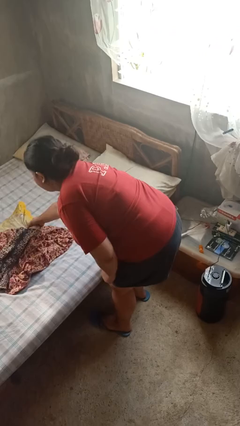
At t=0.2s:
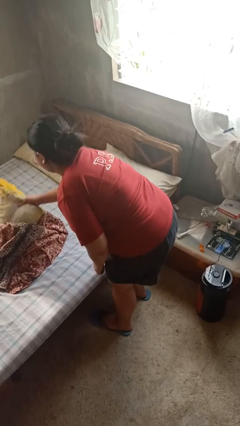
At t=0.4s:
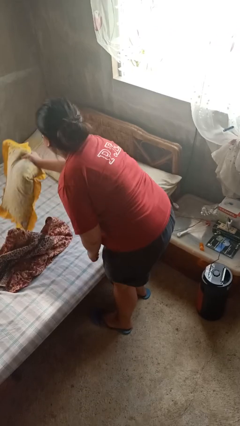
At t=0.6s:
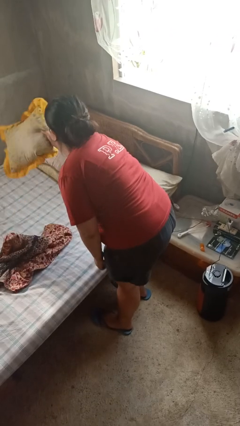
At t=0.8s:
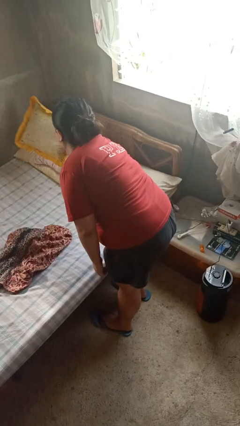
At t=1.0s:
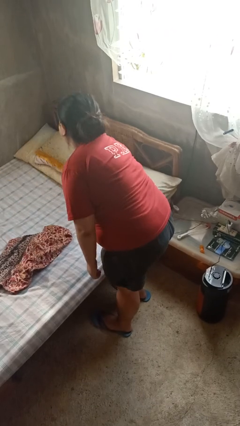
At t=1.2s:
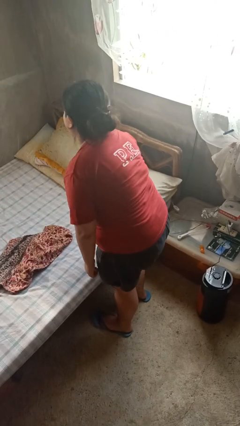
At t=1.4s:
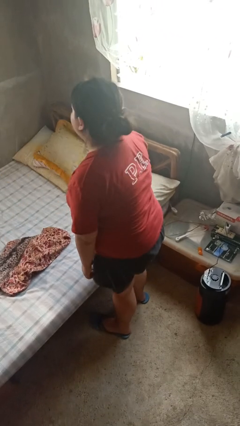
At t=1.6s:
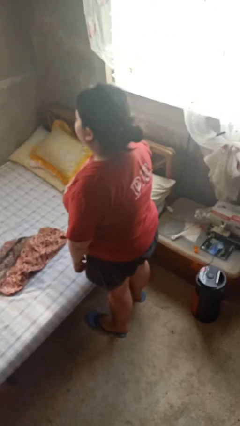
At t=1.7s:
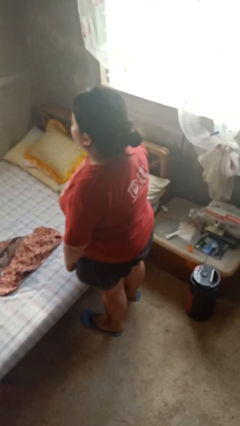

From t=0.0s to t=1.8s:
person makes bed

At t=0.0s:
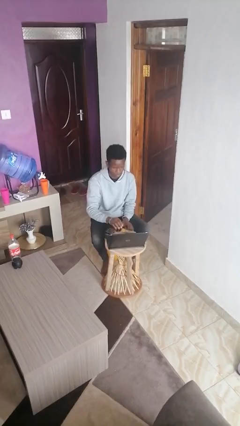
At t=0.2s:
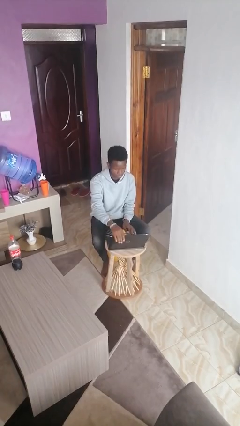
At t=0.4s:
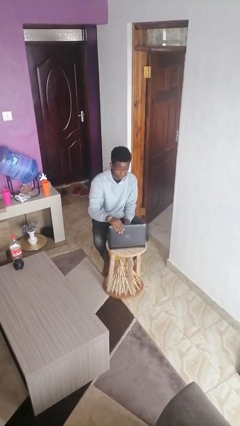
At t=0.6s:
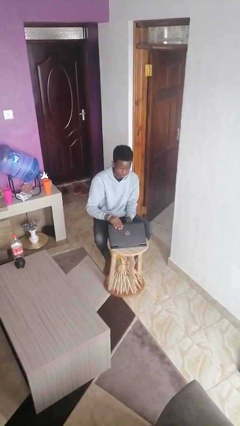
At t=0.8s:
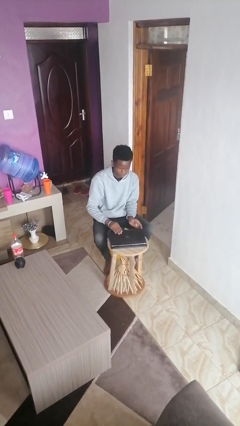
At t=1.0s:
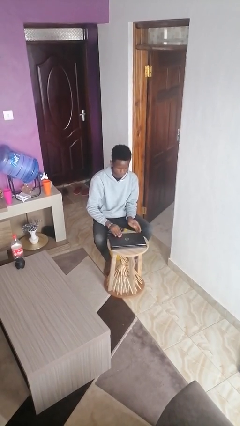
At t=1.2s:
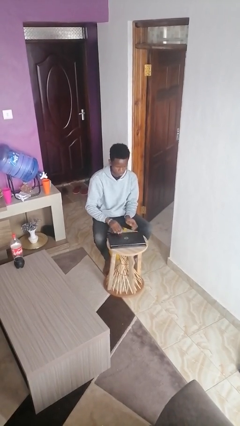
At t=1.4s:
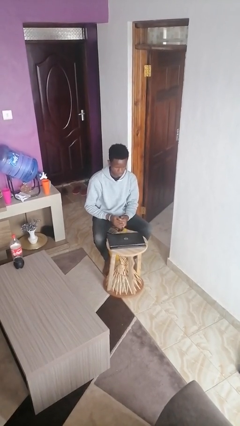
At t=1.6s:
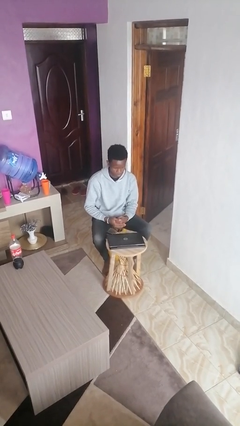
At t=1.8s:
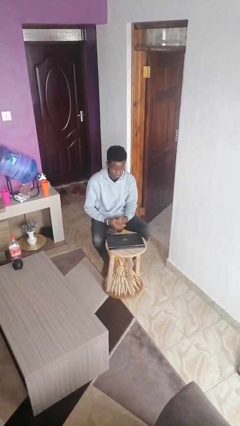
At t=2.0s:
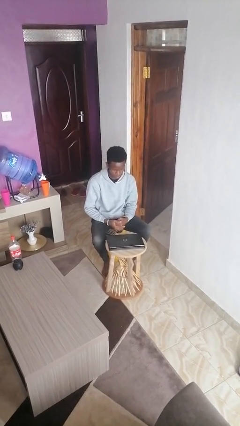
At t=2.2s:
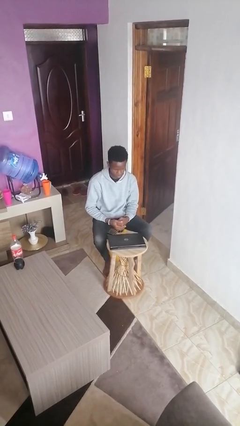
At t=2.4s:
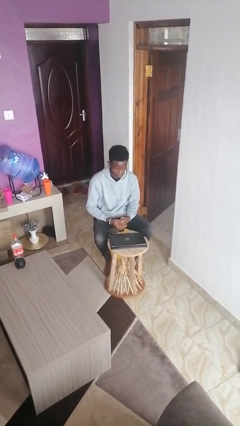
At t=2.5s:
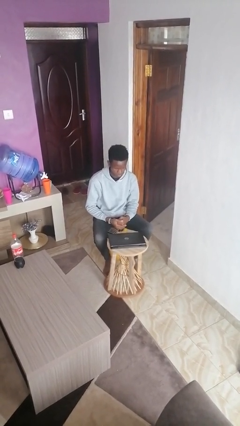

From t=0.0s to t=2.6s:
person closes laptop

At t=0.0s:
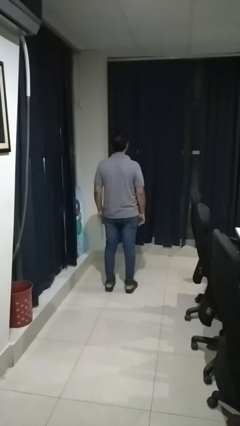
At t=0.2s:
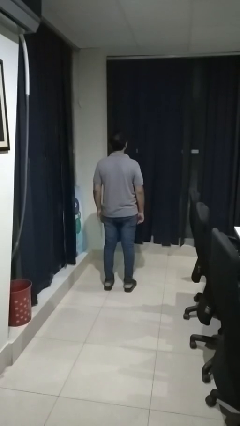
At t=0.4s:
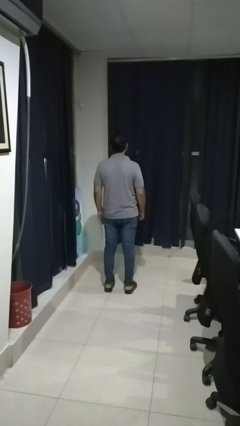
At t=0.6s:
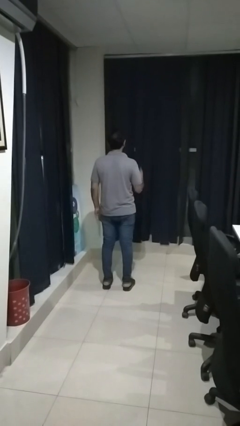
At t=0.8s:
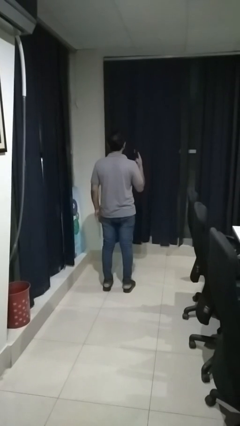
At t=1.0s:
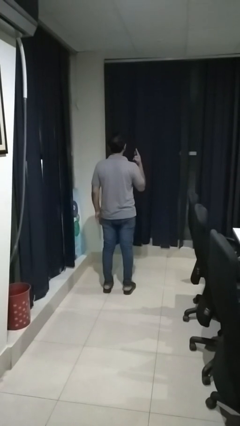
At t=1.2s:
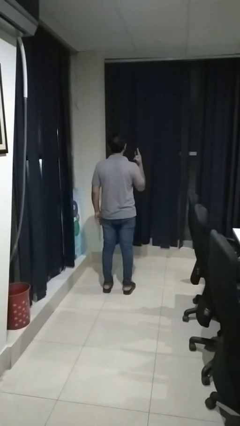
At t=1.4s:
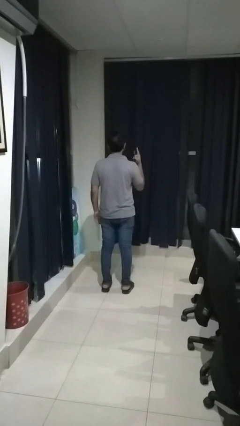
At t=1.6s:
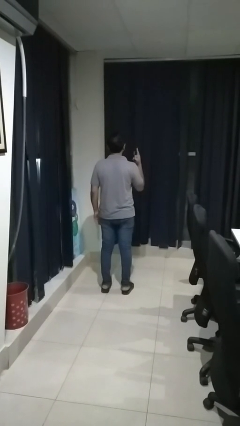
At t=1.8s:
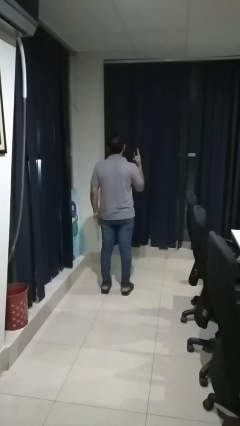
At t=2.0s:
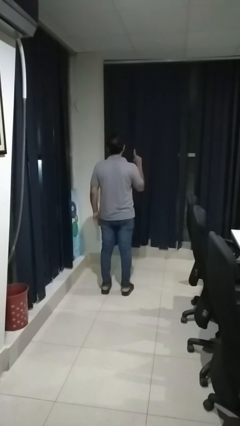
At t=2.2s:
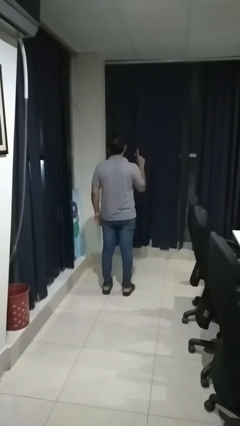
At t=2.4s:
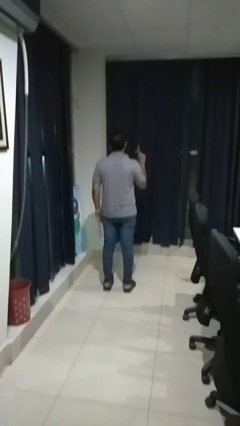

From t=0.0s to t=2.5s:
person gestures number one

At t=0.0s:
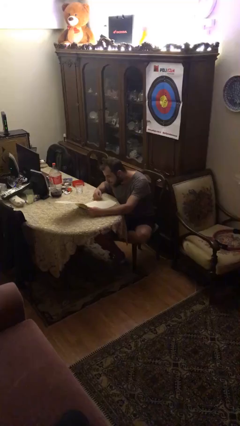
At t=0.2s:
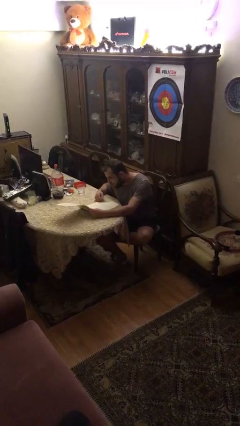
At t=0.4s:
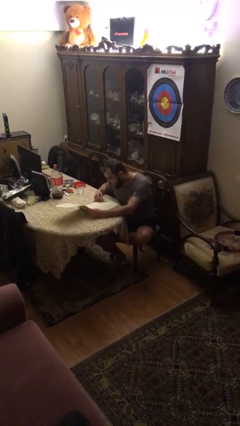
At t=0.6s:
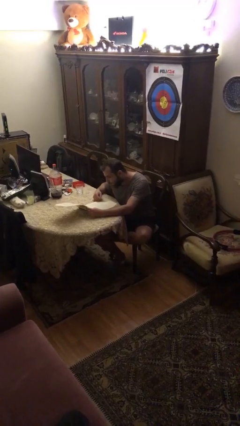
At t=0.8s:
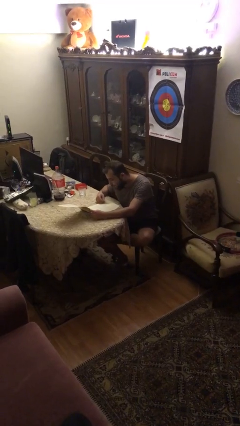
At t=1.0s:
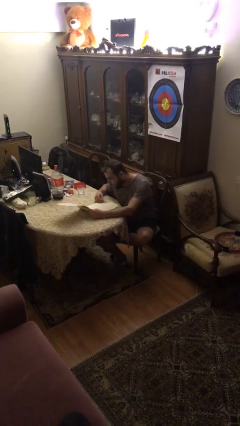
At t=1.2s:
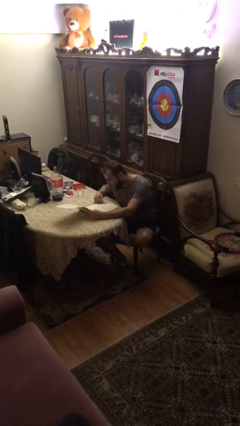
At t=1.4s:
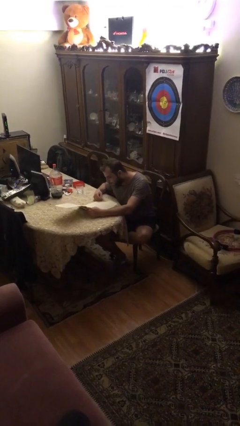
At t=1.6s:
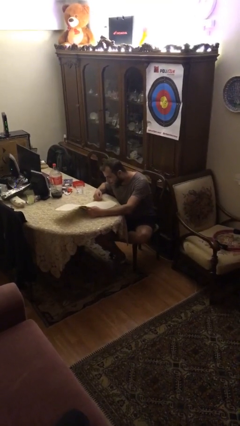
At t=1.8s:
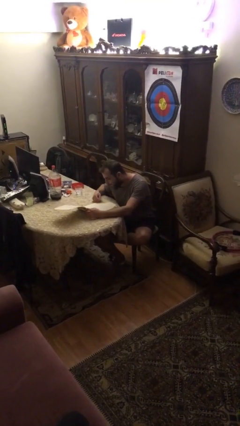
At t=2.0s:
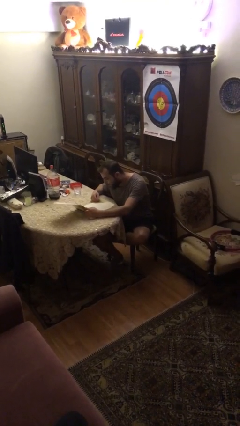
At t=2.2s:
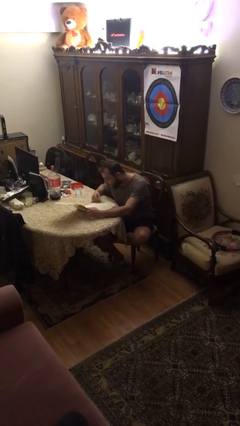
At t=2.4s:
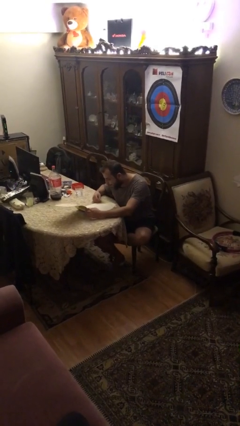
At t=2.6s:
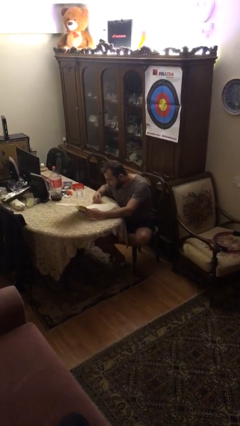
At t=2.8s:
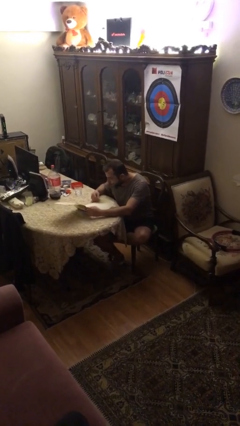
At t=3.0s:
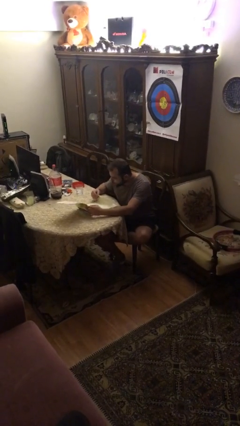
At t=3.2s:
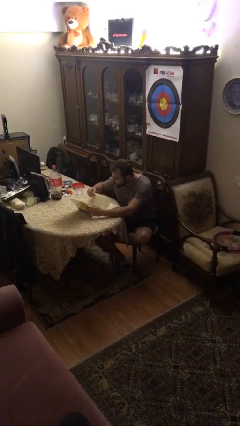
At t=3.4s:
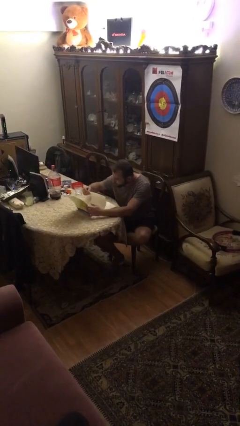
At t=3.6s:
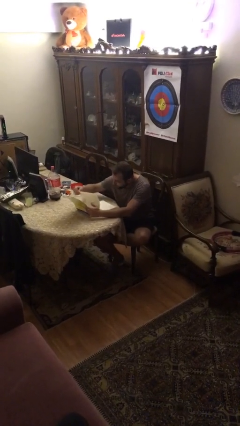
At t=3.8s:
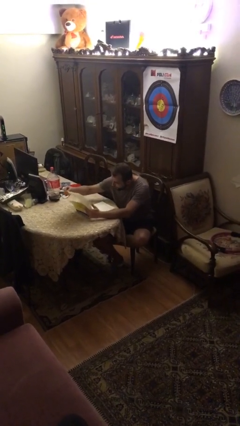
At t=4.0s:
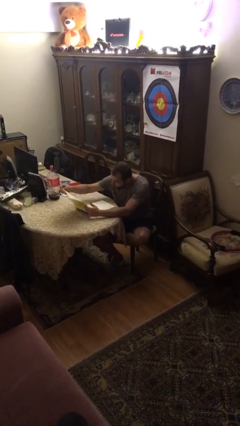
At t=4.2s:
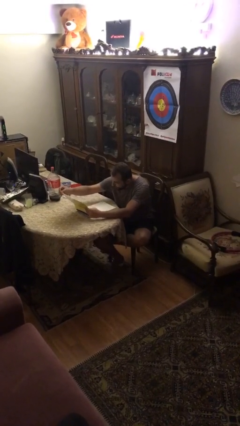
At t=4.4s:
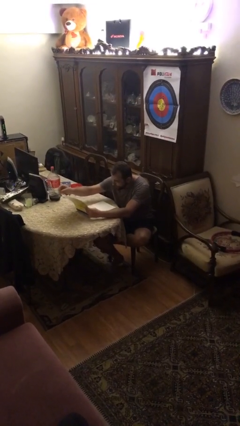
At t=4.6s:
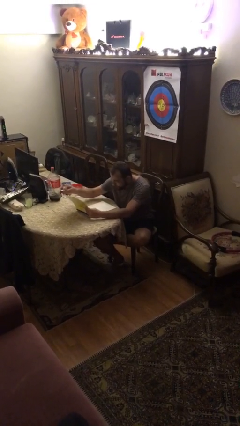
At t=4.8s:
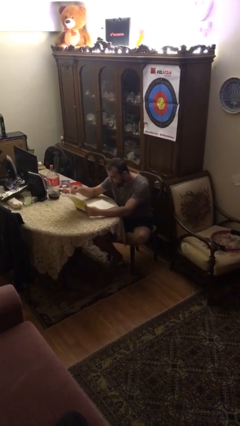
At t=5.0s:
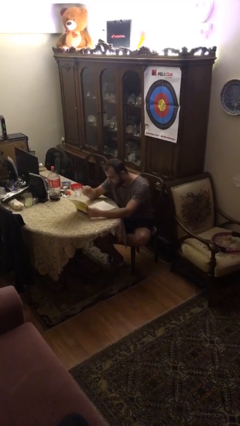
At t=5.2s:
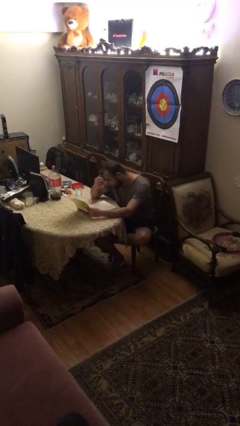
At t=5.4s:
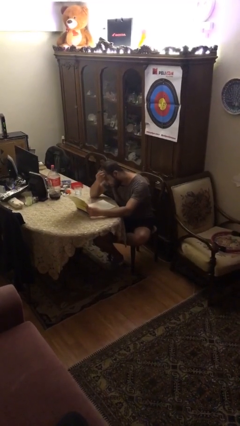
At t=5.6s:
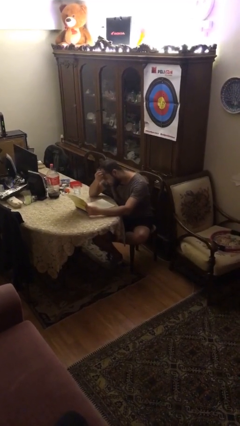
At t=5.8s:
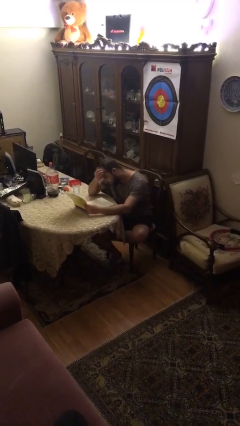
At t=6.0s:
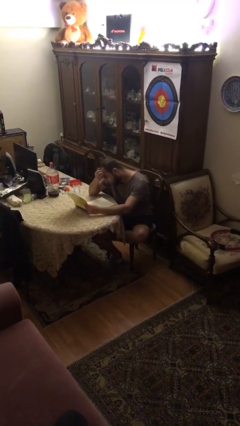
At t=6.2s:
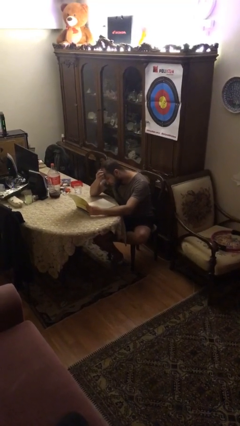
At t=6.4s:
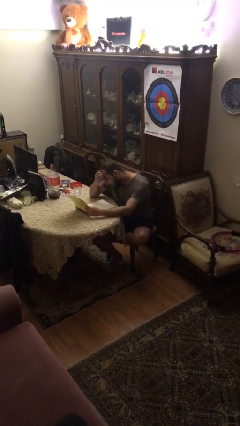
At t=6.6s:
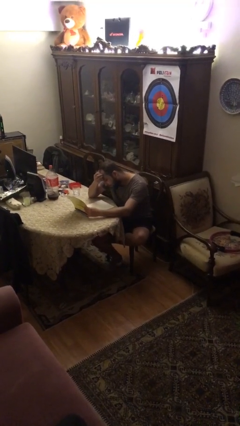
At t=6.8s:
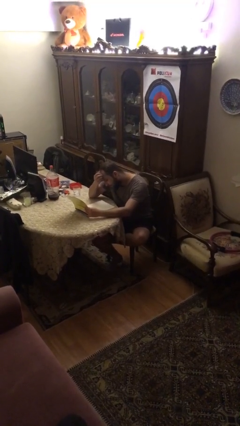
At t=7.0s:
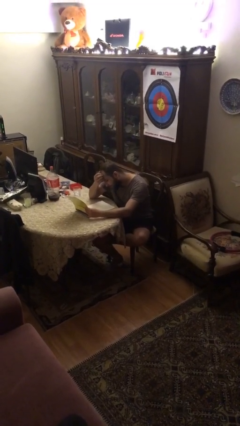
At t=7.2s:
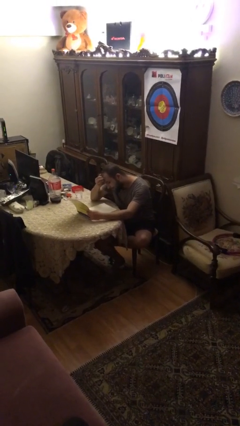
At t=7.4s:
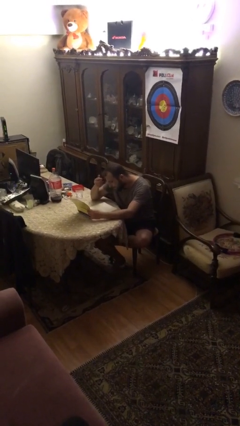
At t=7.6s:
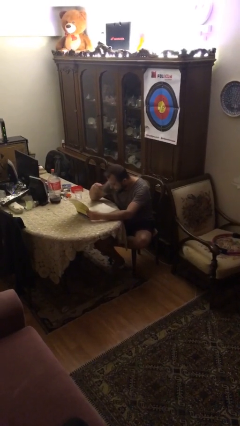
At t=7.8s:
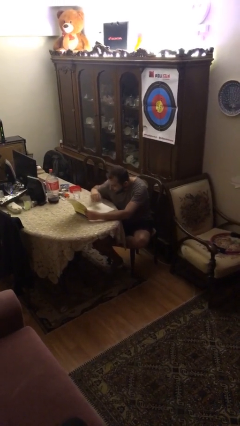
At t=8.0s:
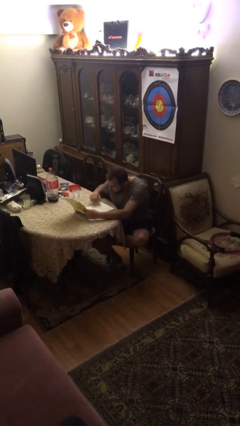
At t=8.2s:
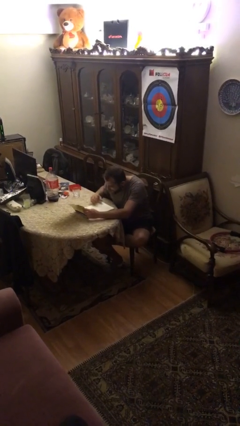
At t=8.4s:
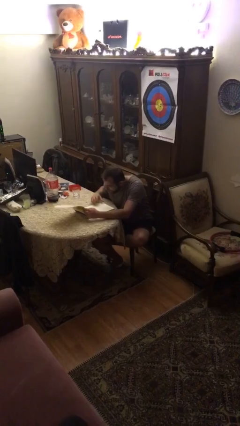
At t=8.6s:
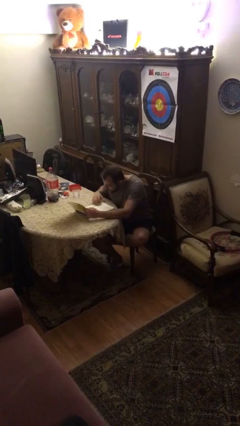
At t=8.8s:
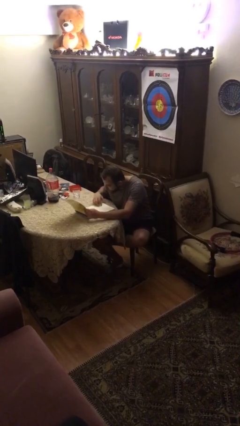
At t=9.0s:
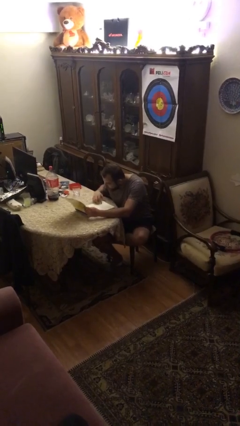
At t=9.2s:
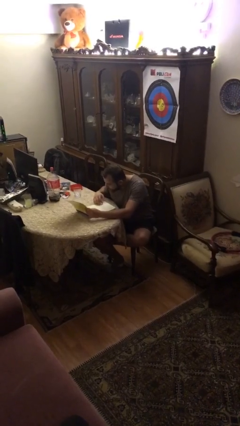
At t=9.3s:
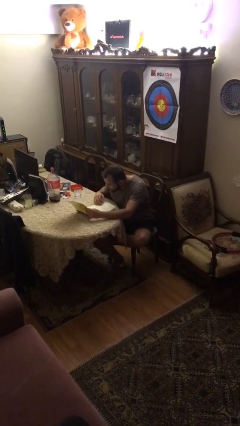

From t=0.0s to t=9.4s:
person reads document

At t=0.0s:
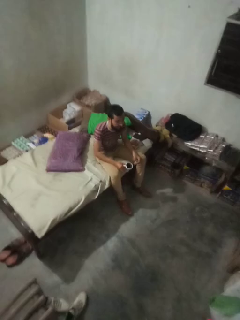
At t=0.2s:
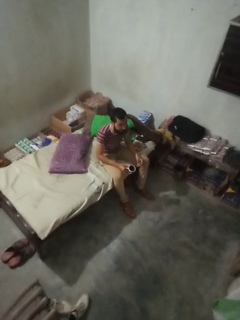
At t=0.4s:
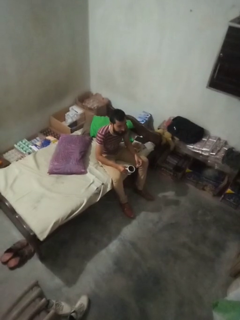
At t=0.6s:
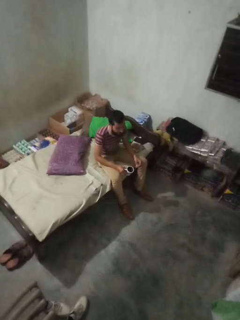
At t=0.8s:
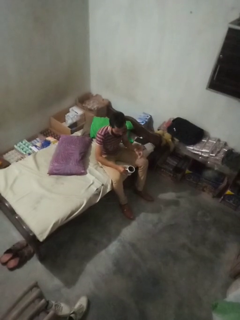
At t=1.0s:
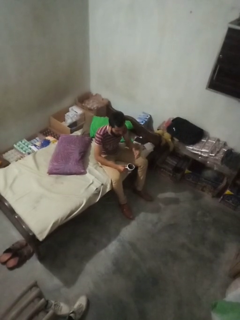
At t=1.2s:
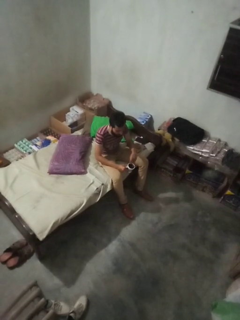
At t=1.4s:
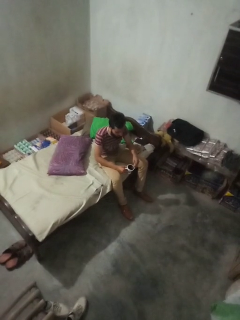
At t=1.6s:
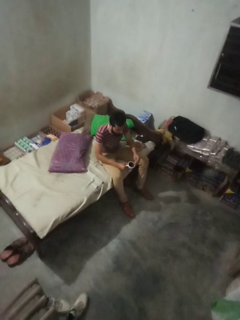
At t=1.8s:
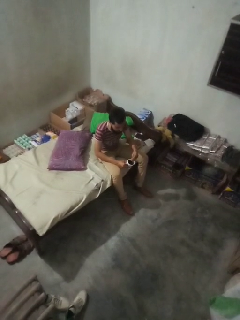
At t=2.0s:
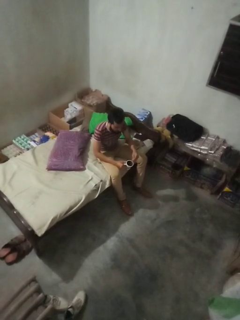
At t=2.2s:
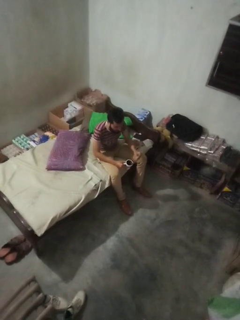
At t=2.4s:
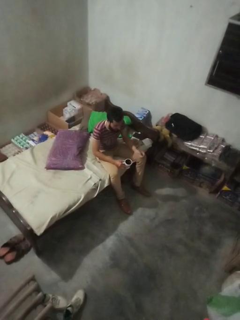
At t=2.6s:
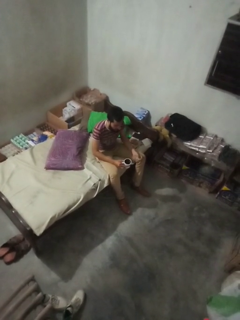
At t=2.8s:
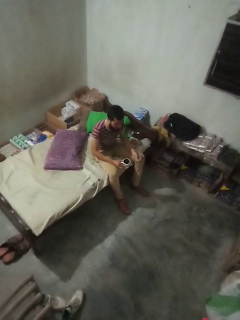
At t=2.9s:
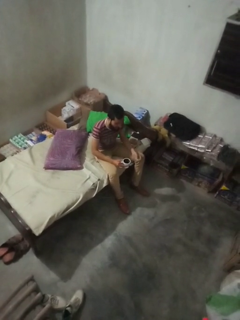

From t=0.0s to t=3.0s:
person stirs mug
